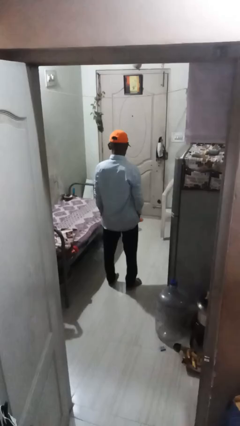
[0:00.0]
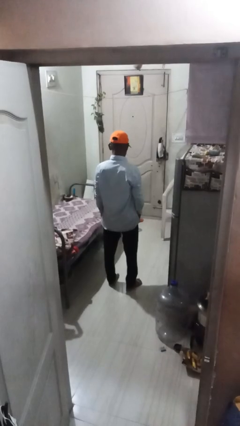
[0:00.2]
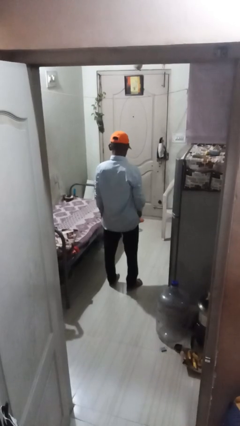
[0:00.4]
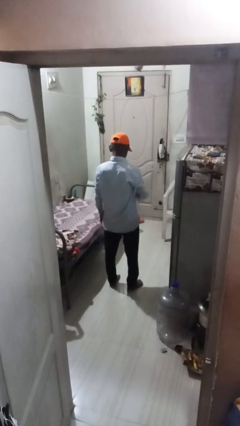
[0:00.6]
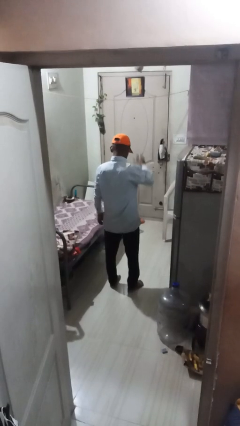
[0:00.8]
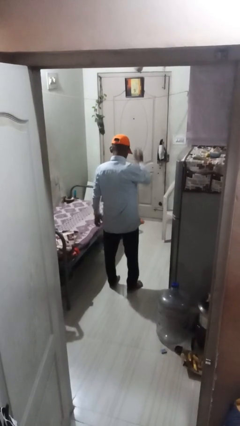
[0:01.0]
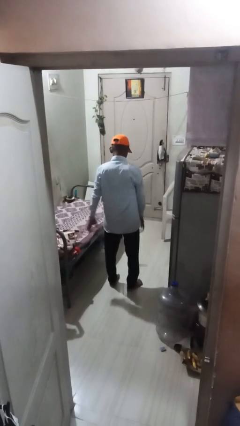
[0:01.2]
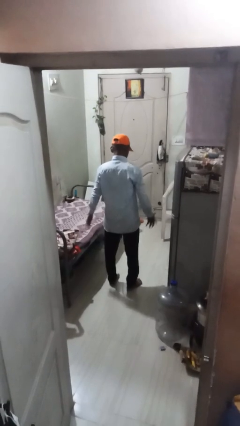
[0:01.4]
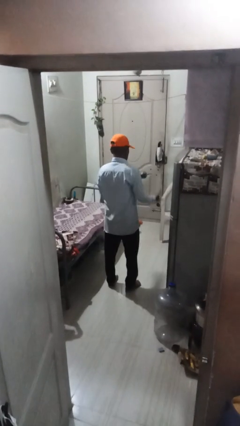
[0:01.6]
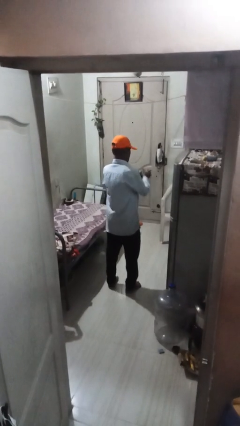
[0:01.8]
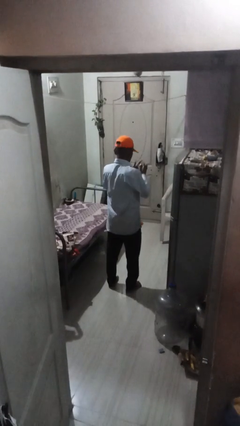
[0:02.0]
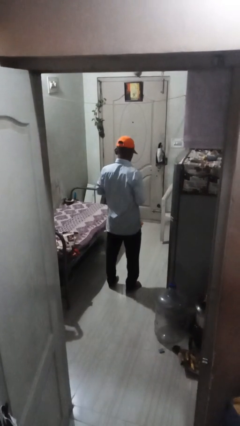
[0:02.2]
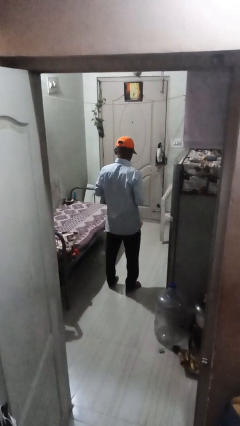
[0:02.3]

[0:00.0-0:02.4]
person bounces ball on floor

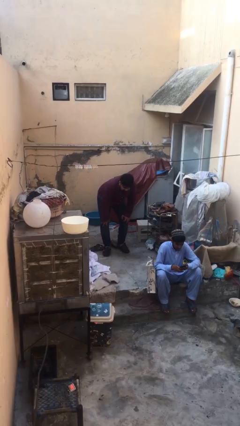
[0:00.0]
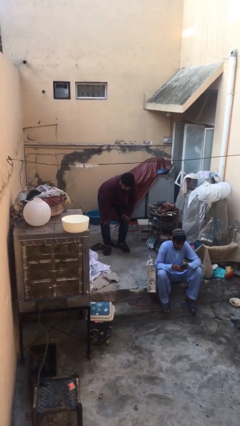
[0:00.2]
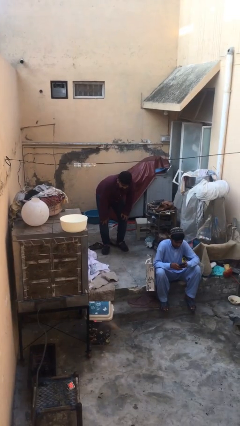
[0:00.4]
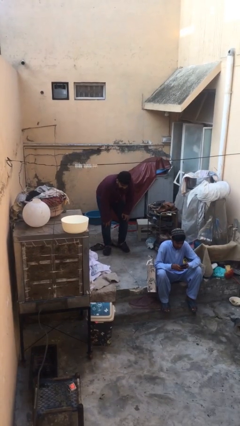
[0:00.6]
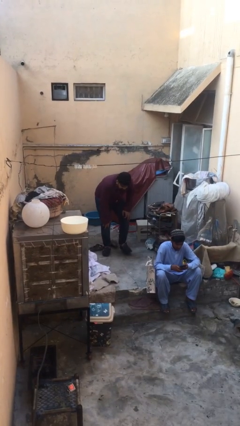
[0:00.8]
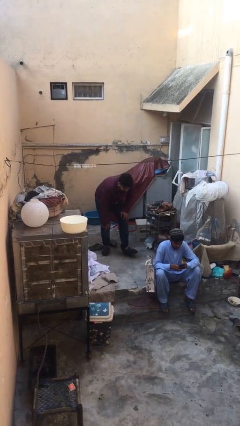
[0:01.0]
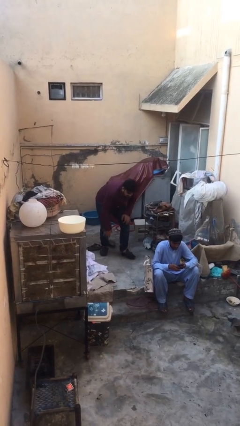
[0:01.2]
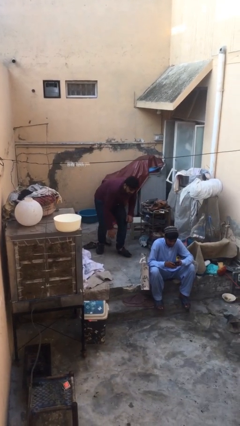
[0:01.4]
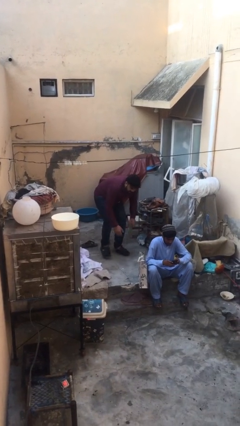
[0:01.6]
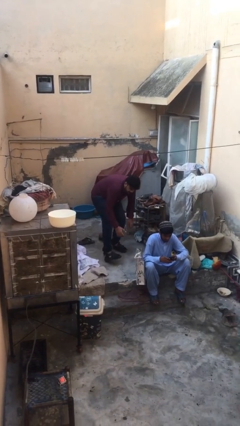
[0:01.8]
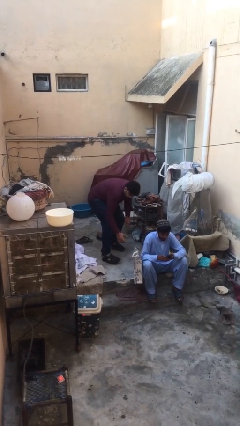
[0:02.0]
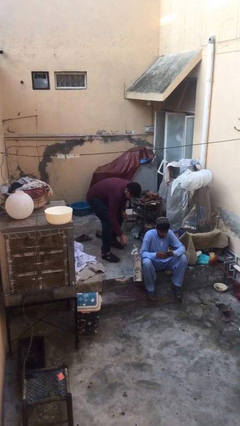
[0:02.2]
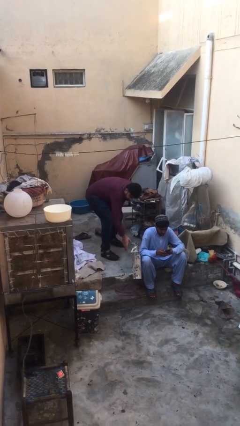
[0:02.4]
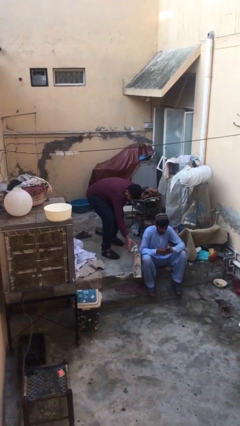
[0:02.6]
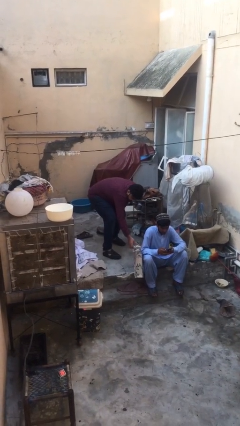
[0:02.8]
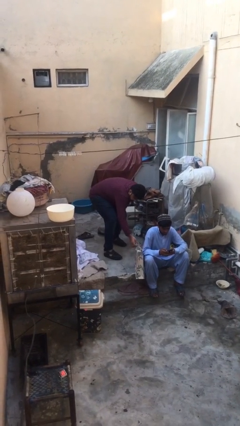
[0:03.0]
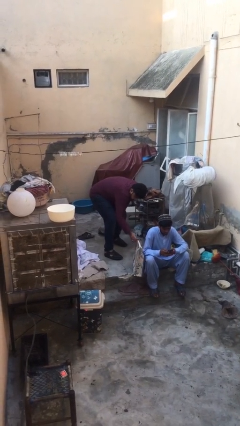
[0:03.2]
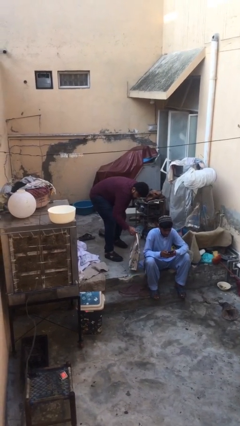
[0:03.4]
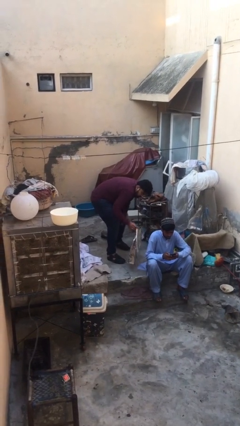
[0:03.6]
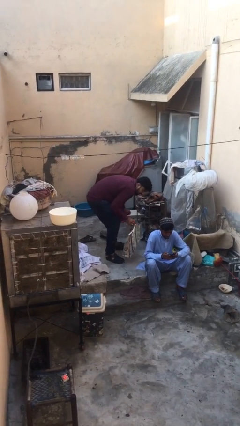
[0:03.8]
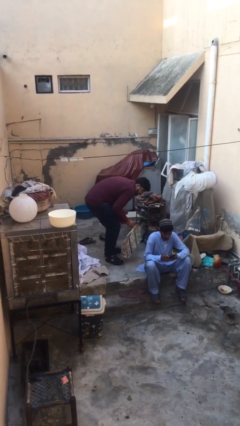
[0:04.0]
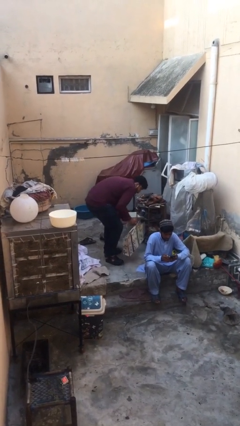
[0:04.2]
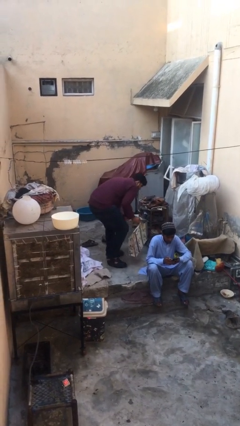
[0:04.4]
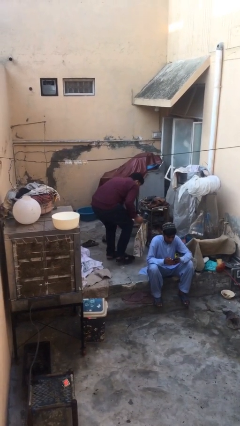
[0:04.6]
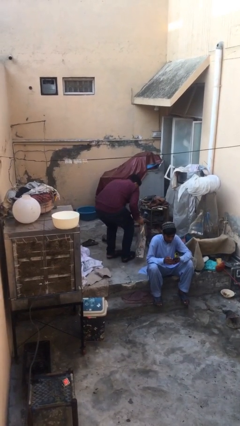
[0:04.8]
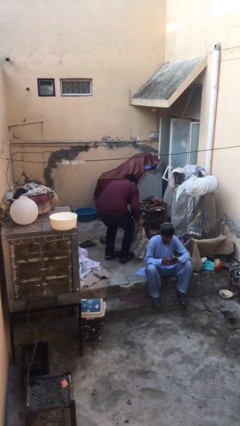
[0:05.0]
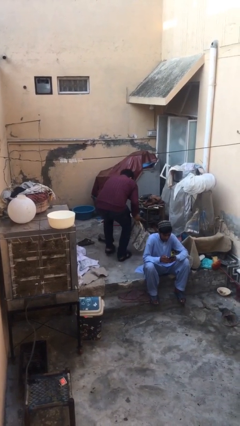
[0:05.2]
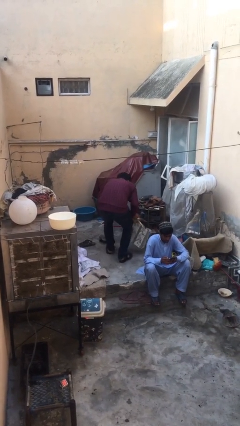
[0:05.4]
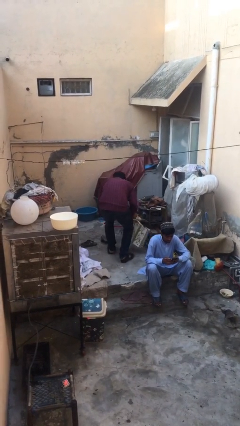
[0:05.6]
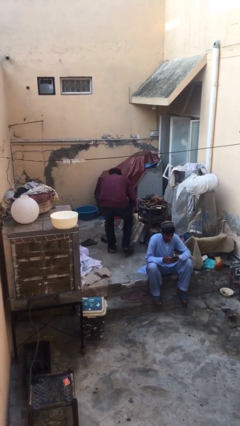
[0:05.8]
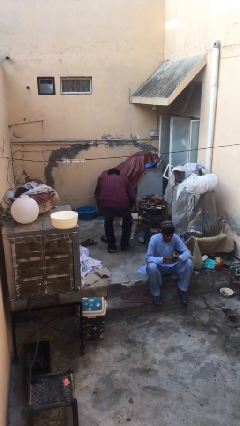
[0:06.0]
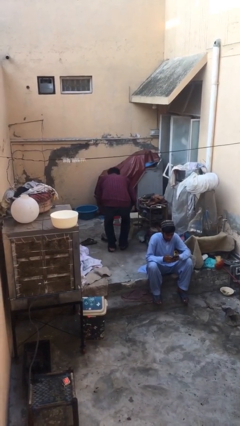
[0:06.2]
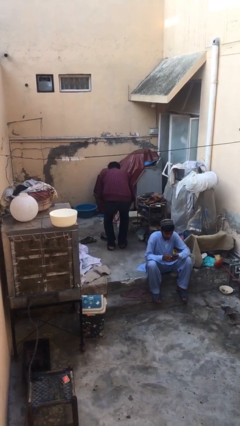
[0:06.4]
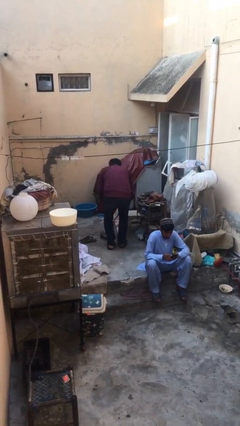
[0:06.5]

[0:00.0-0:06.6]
person steals object from person

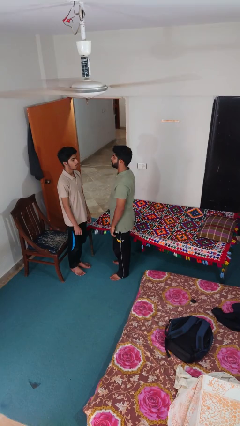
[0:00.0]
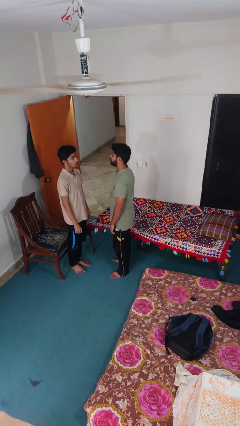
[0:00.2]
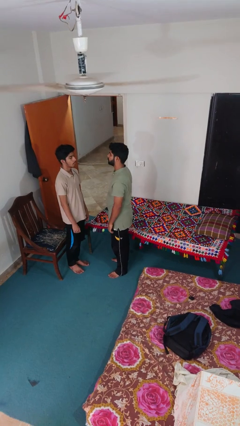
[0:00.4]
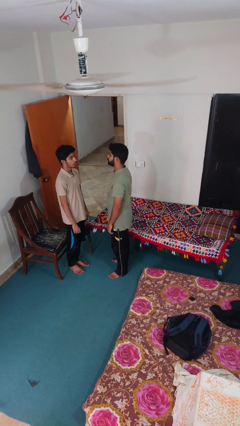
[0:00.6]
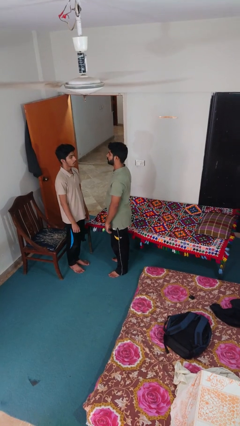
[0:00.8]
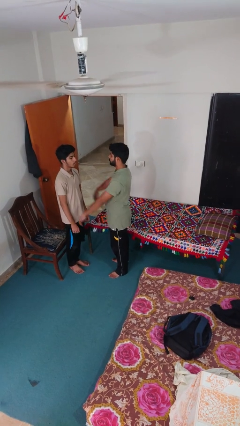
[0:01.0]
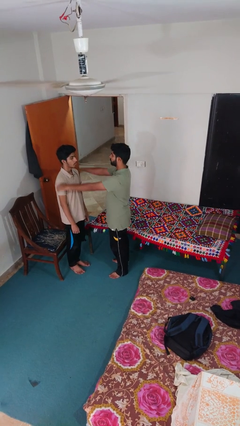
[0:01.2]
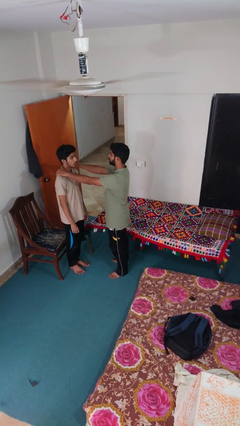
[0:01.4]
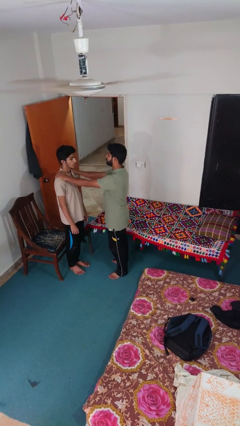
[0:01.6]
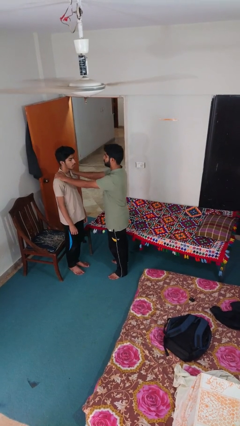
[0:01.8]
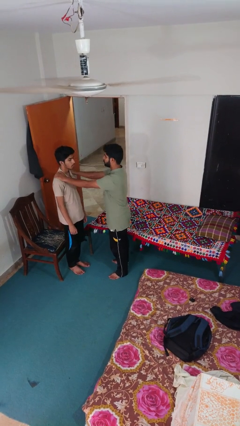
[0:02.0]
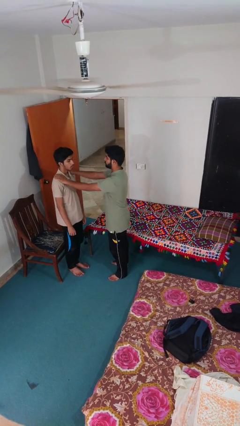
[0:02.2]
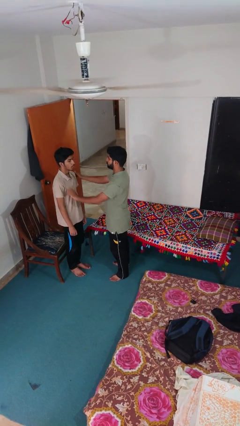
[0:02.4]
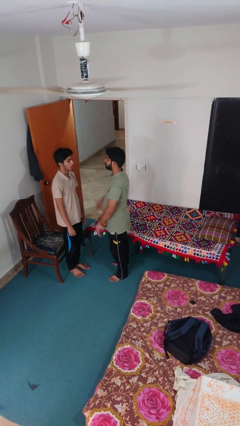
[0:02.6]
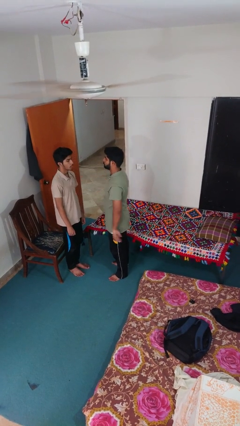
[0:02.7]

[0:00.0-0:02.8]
person pounds shoulders of person

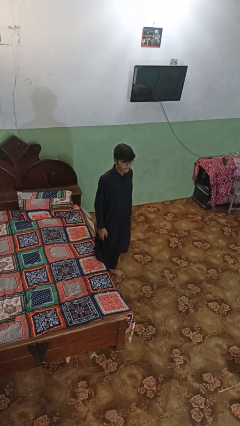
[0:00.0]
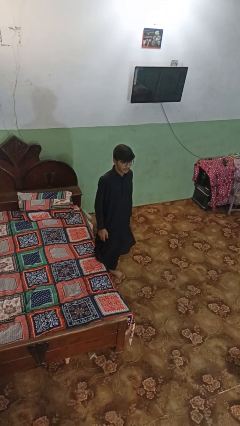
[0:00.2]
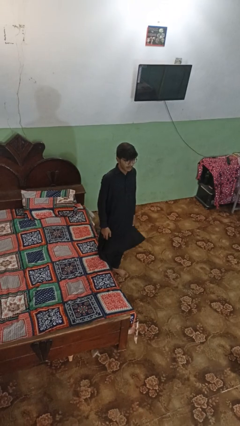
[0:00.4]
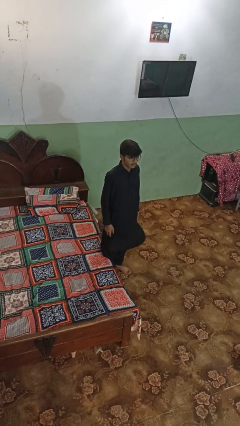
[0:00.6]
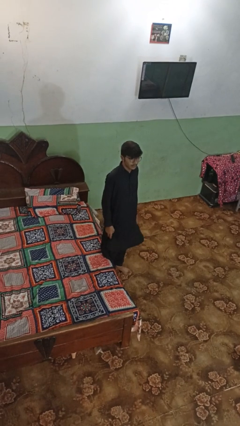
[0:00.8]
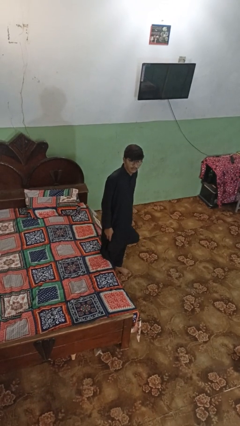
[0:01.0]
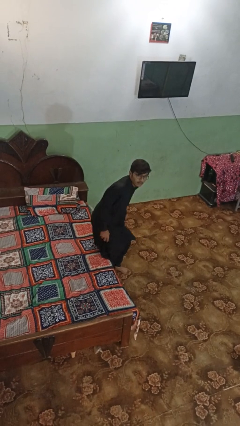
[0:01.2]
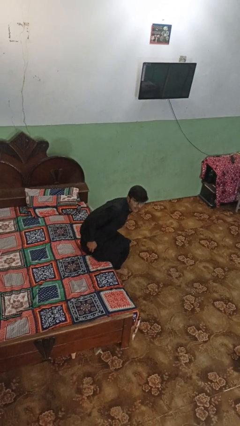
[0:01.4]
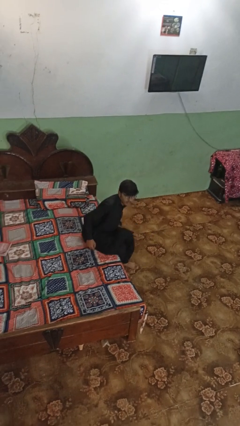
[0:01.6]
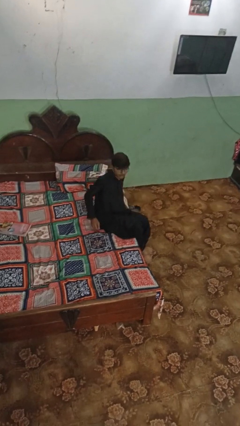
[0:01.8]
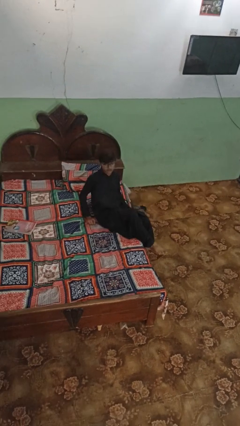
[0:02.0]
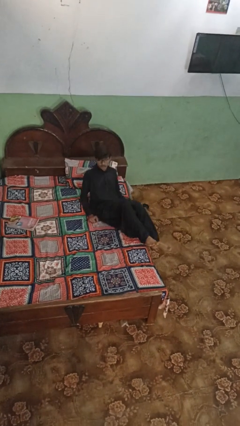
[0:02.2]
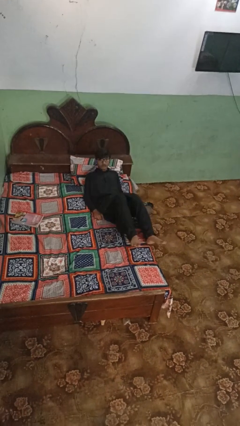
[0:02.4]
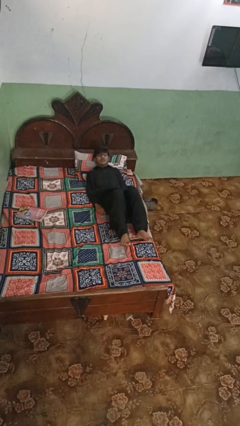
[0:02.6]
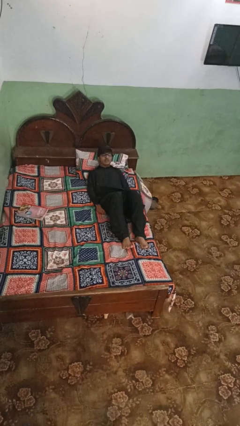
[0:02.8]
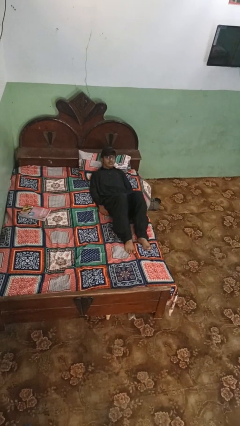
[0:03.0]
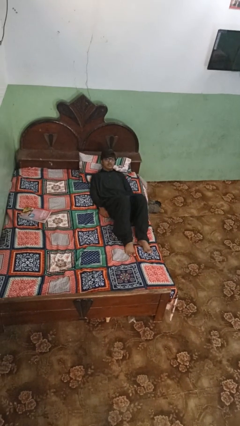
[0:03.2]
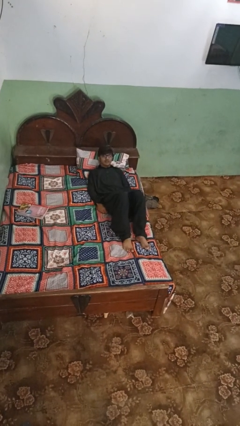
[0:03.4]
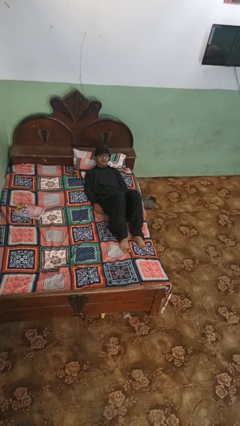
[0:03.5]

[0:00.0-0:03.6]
person lies down on bed

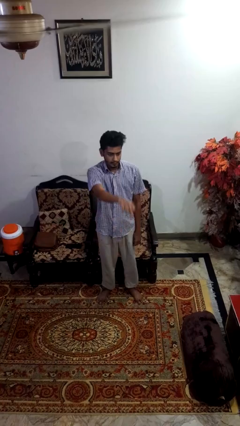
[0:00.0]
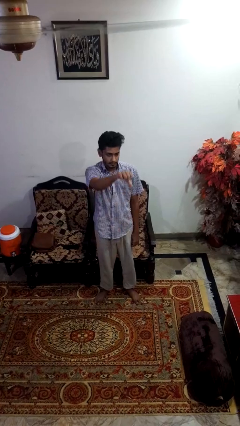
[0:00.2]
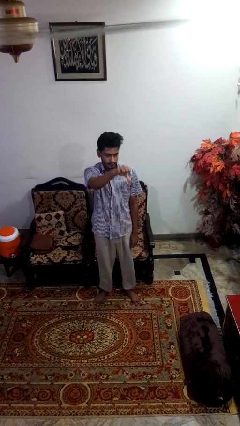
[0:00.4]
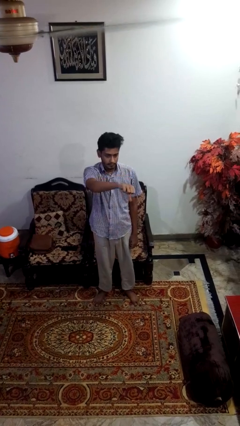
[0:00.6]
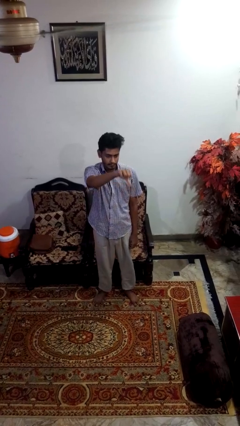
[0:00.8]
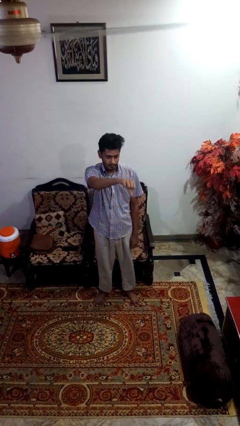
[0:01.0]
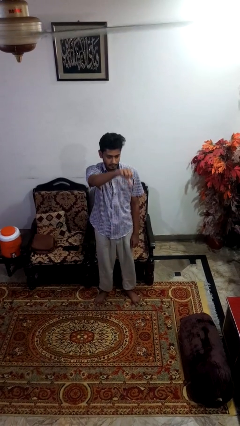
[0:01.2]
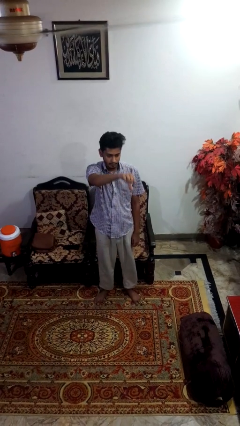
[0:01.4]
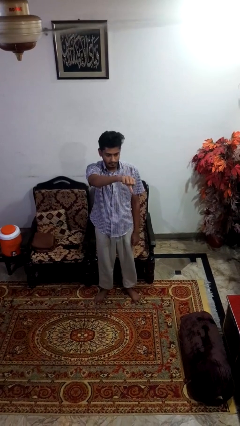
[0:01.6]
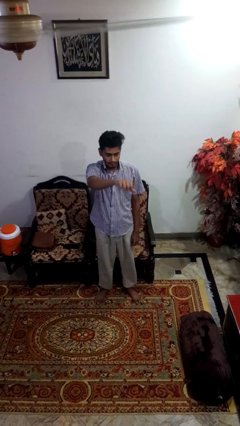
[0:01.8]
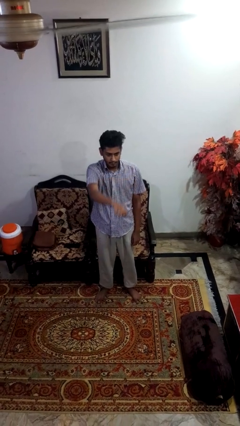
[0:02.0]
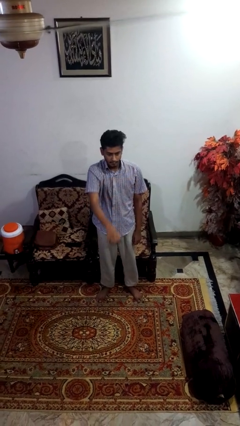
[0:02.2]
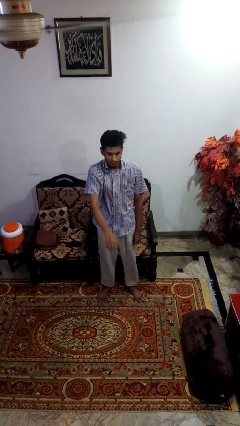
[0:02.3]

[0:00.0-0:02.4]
person gestures thumbs down
